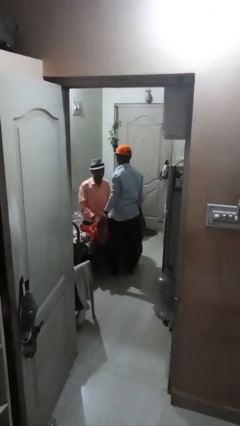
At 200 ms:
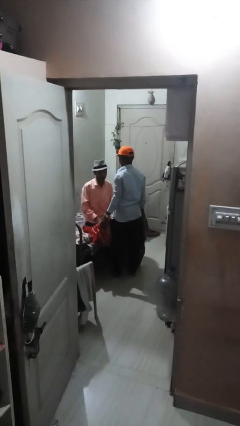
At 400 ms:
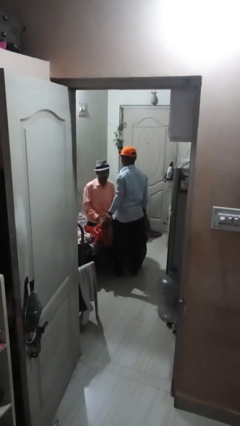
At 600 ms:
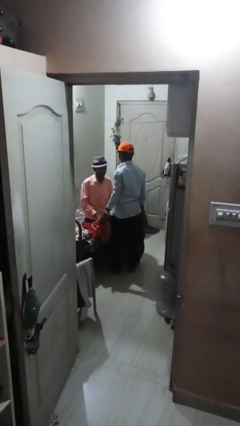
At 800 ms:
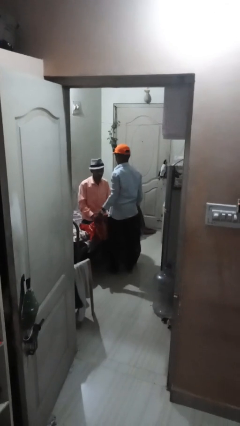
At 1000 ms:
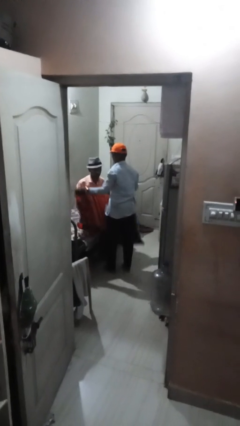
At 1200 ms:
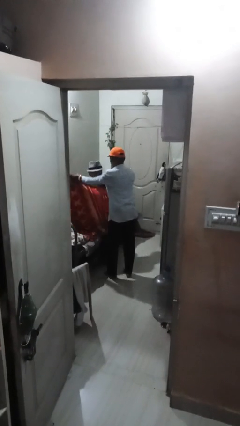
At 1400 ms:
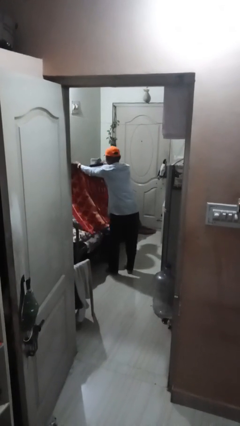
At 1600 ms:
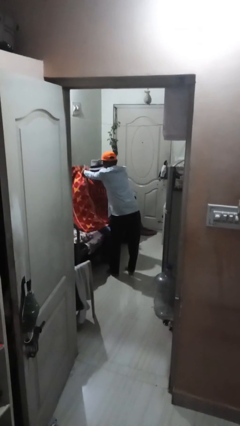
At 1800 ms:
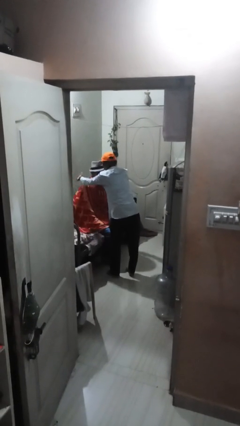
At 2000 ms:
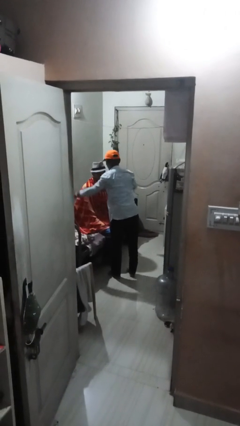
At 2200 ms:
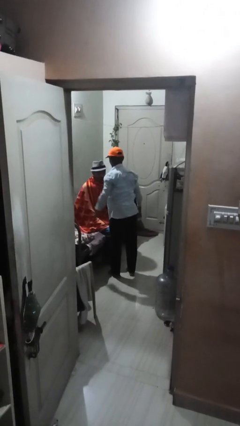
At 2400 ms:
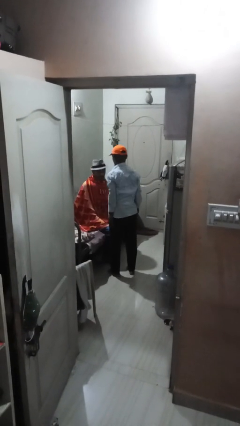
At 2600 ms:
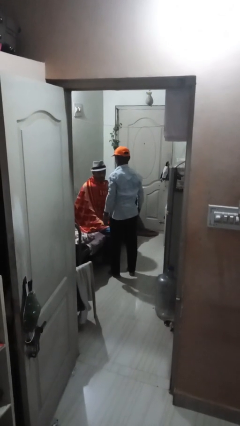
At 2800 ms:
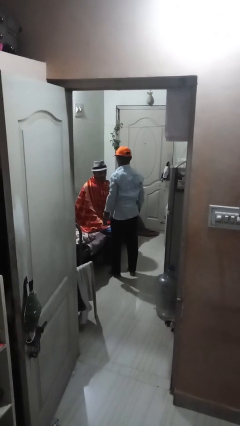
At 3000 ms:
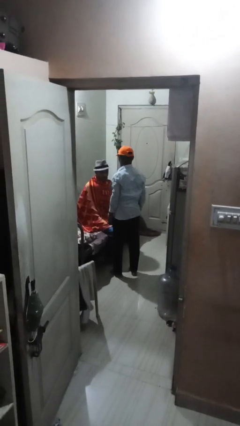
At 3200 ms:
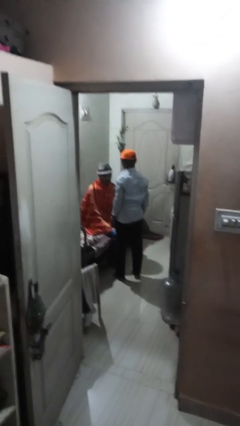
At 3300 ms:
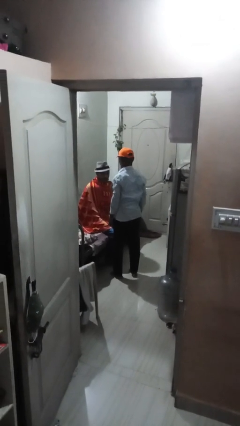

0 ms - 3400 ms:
person covers friend with blanket

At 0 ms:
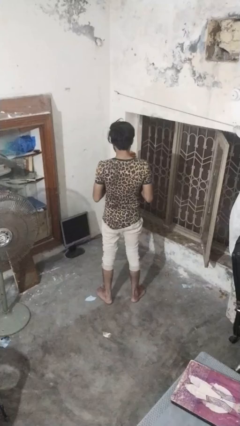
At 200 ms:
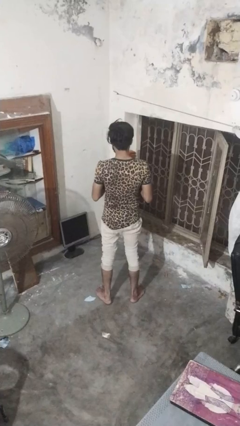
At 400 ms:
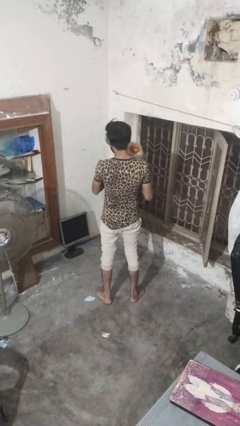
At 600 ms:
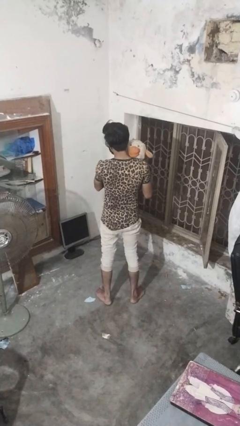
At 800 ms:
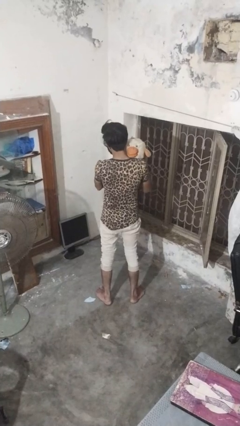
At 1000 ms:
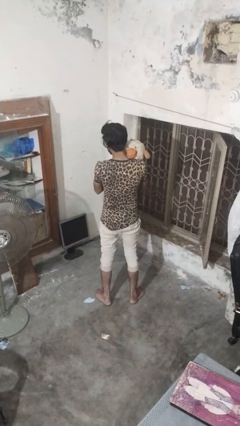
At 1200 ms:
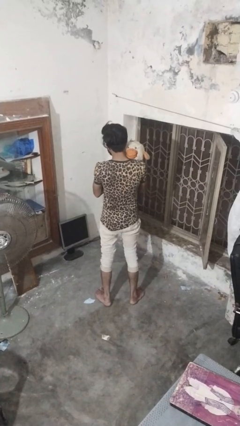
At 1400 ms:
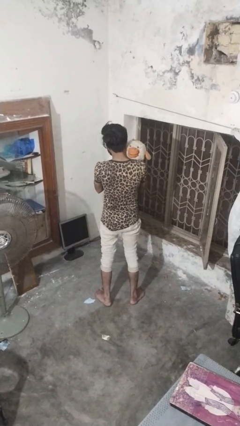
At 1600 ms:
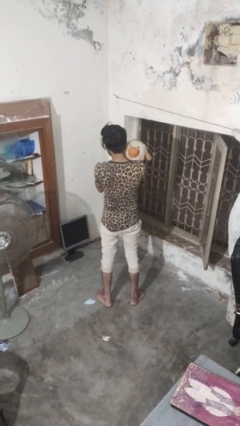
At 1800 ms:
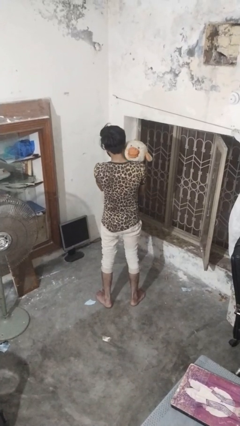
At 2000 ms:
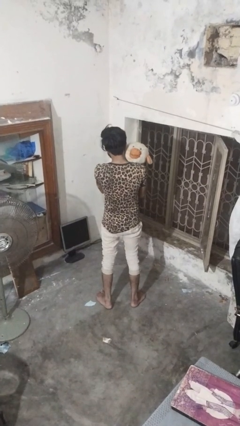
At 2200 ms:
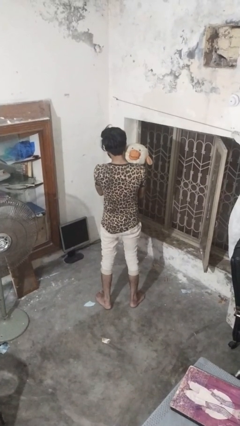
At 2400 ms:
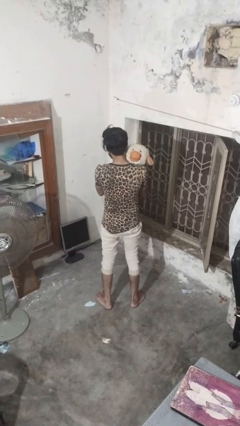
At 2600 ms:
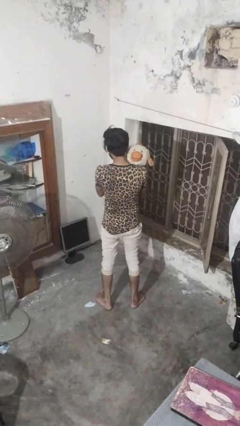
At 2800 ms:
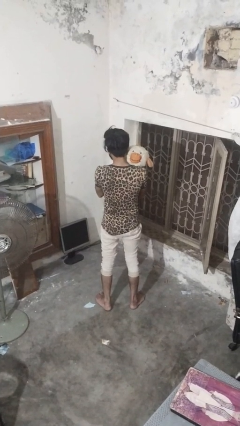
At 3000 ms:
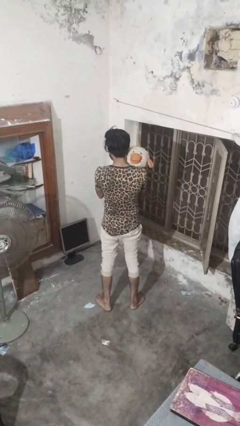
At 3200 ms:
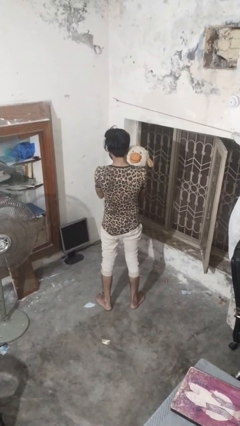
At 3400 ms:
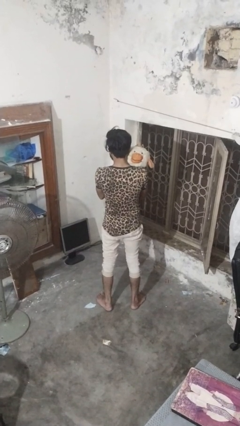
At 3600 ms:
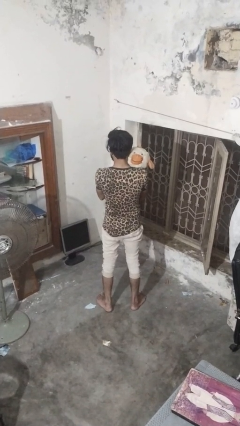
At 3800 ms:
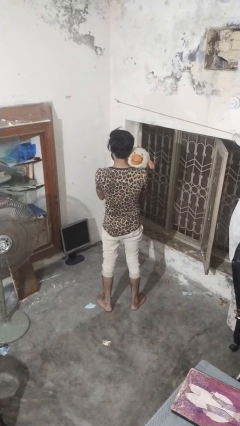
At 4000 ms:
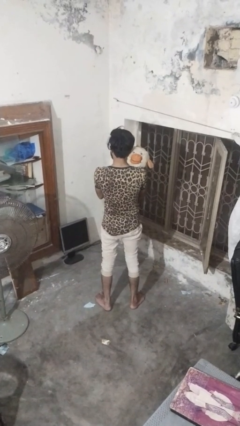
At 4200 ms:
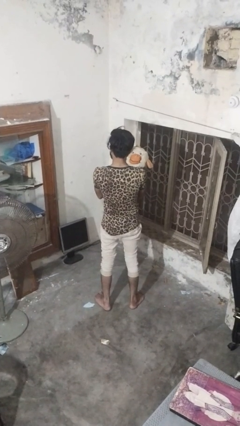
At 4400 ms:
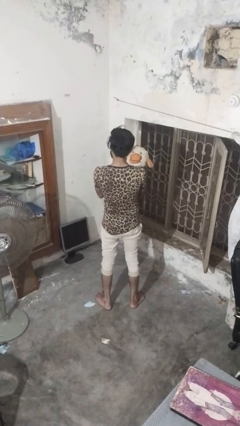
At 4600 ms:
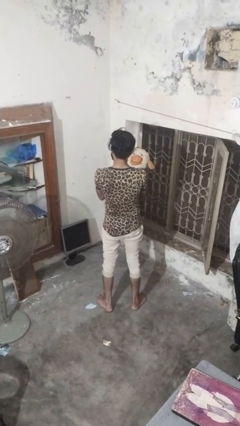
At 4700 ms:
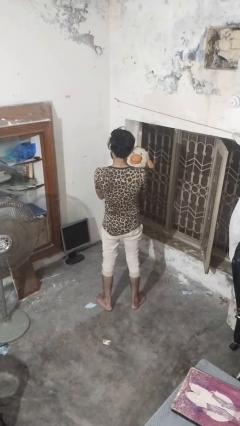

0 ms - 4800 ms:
person hugs stuffed animal

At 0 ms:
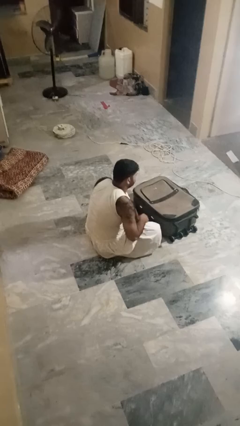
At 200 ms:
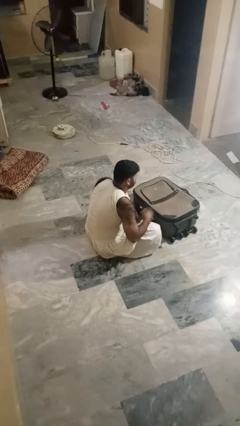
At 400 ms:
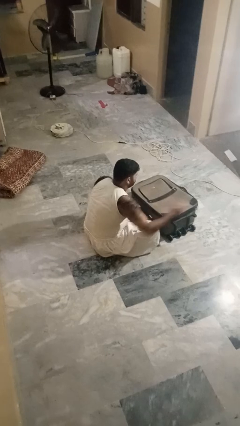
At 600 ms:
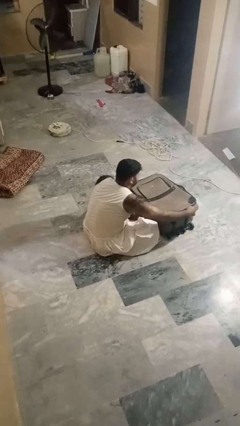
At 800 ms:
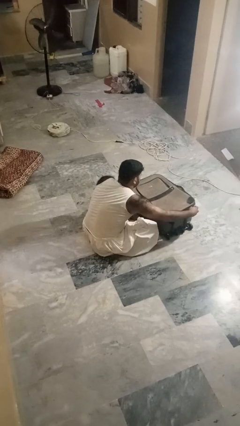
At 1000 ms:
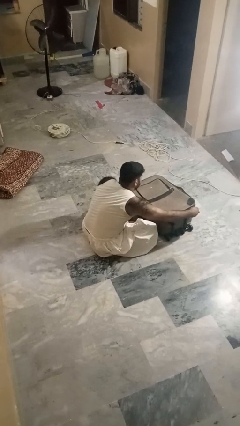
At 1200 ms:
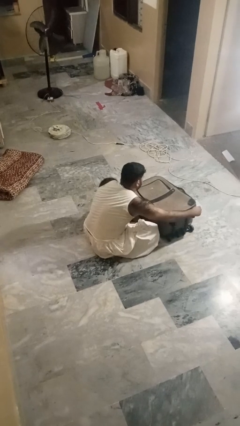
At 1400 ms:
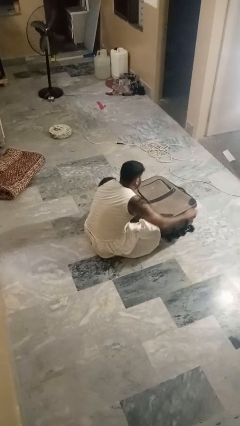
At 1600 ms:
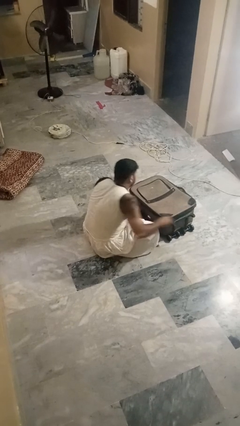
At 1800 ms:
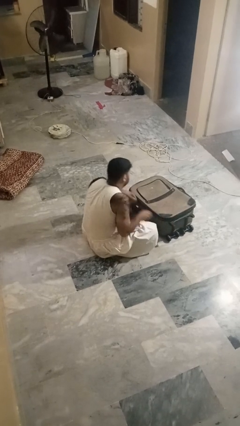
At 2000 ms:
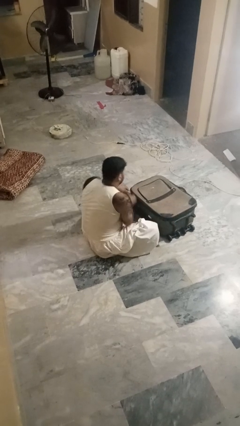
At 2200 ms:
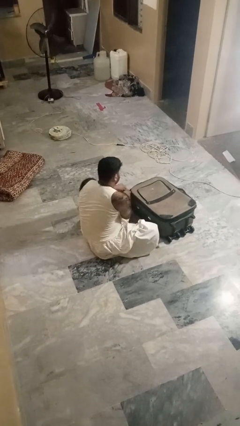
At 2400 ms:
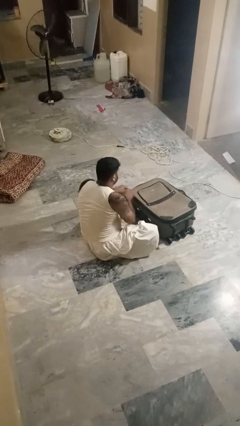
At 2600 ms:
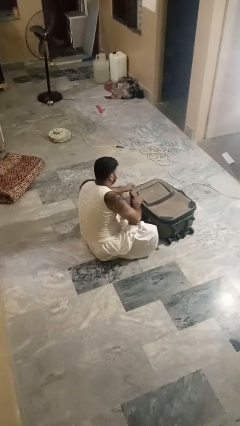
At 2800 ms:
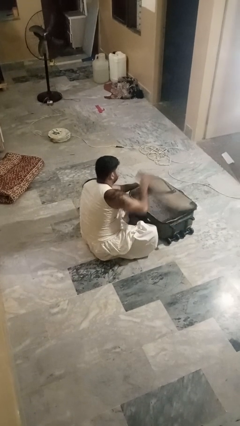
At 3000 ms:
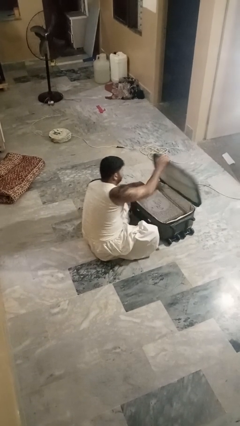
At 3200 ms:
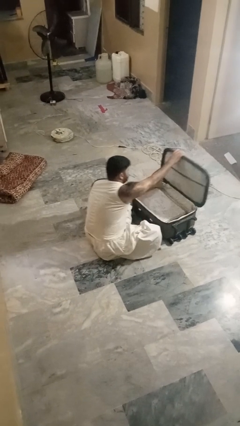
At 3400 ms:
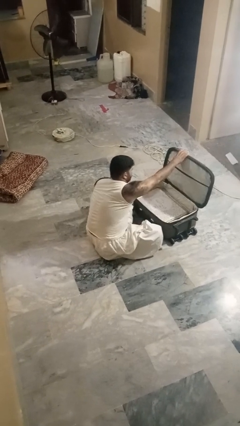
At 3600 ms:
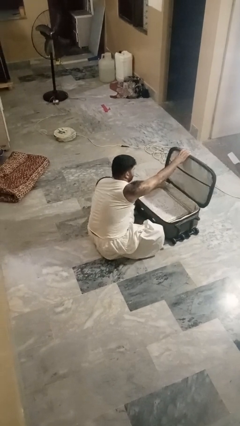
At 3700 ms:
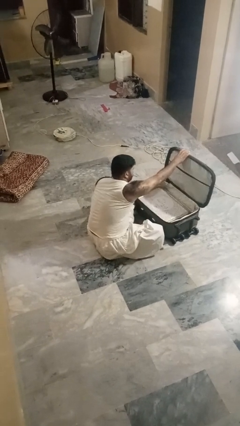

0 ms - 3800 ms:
person opens suitcase

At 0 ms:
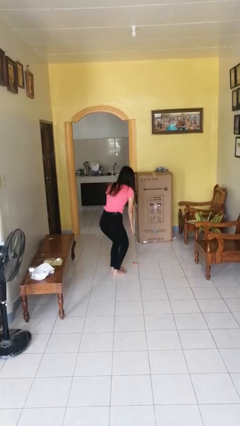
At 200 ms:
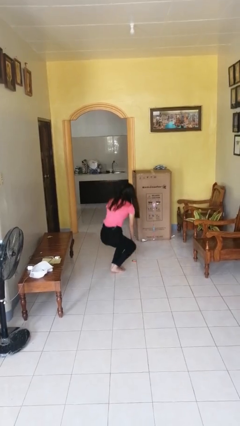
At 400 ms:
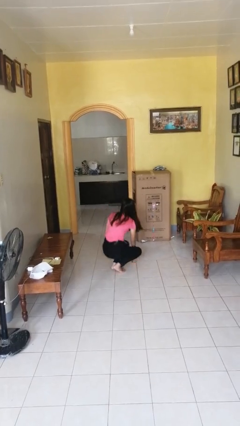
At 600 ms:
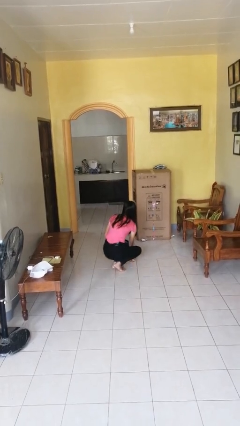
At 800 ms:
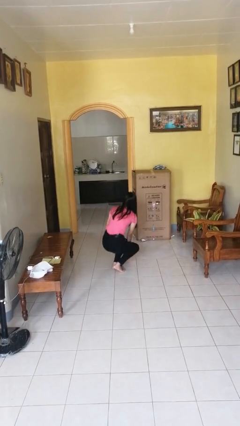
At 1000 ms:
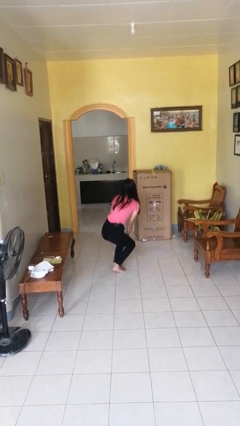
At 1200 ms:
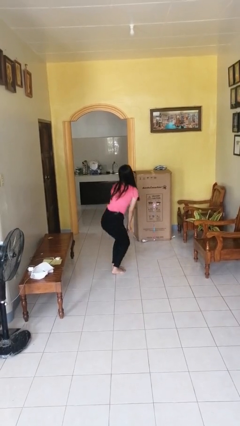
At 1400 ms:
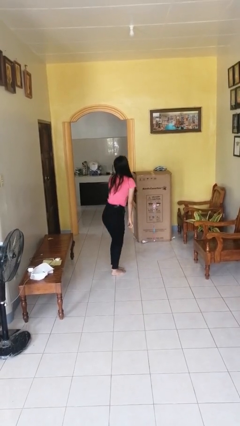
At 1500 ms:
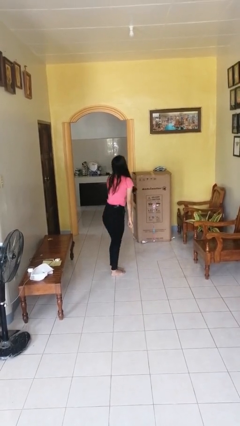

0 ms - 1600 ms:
person picks up object from floor

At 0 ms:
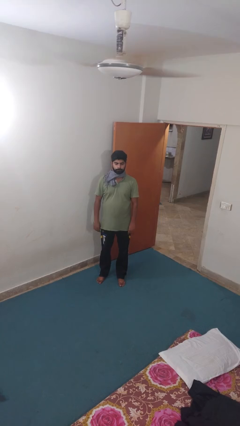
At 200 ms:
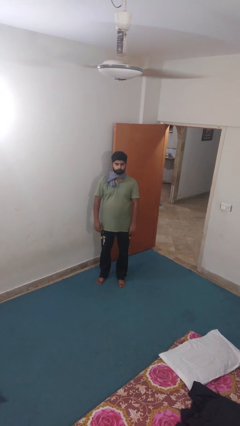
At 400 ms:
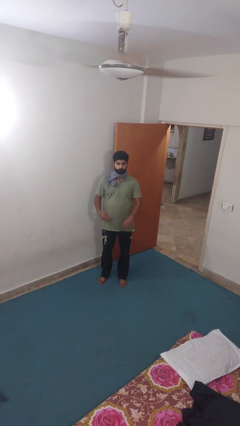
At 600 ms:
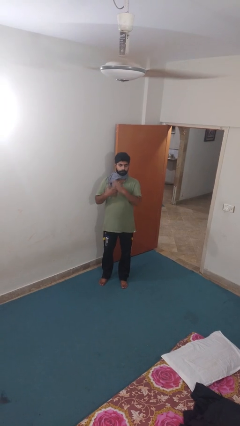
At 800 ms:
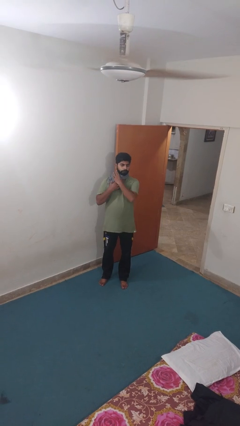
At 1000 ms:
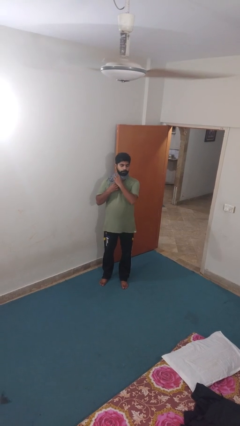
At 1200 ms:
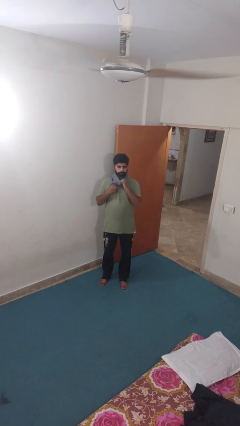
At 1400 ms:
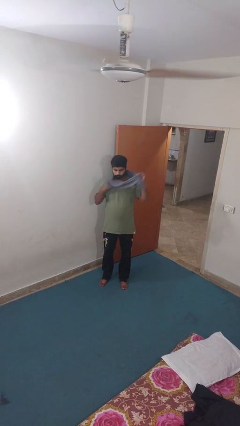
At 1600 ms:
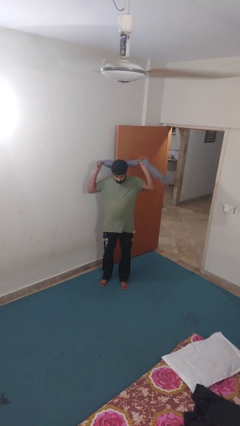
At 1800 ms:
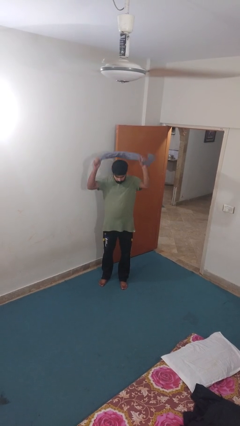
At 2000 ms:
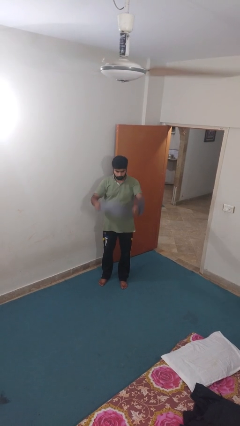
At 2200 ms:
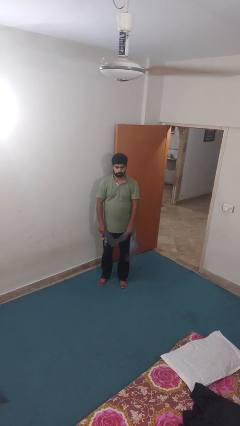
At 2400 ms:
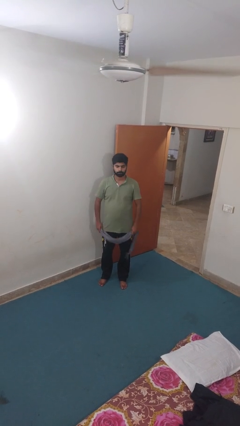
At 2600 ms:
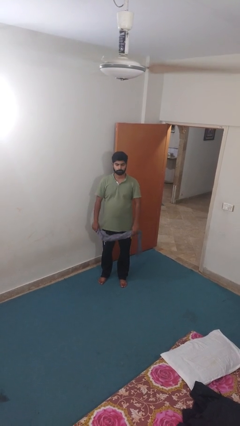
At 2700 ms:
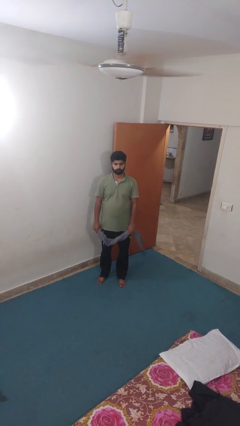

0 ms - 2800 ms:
person takes off scarf

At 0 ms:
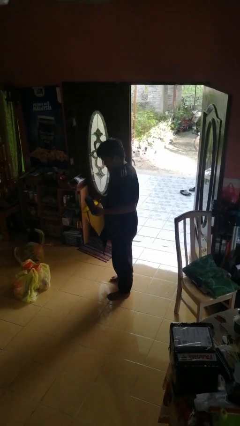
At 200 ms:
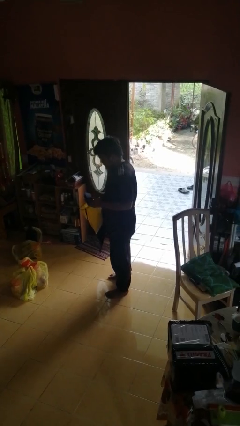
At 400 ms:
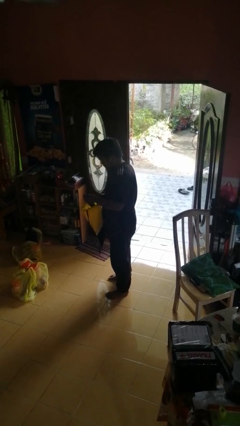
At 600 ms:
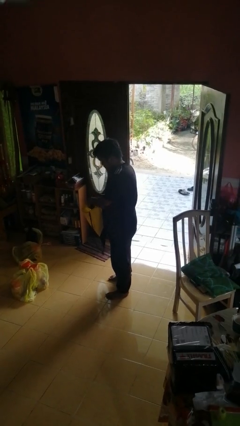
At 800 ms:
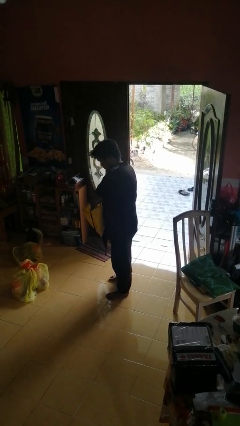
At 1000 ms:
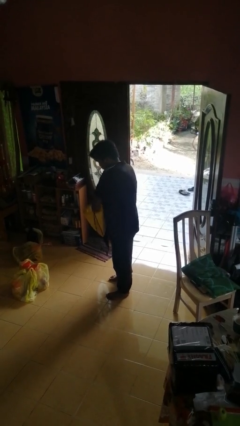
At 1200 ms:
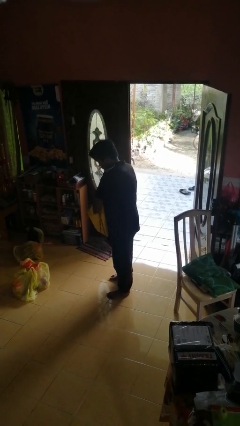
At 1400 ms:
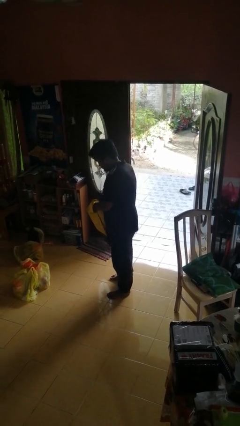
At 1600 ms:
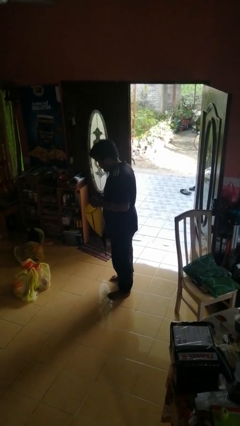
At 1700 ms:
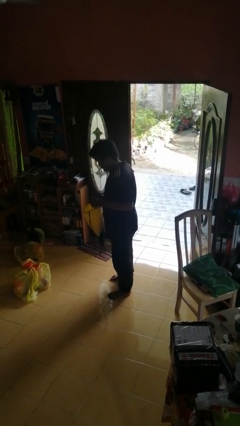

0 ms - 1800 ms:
person puts object into bag
